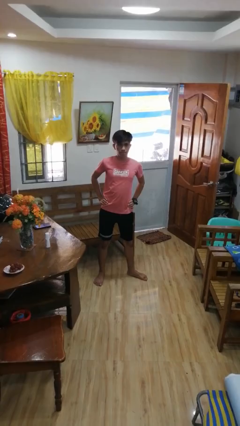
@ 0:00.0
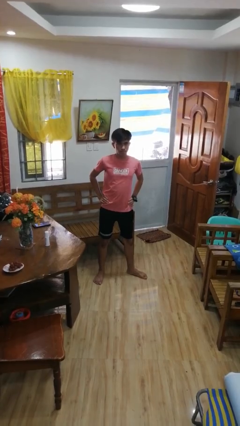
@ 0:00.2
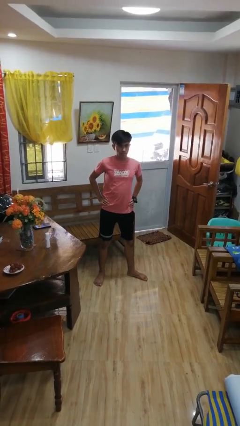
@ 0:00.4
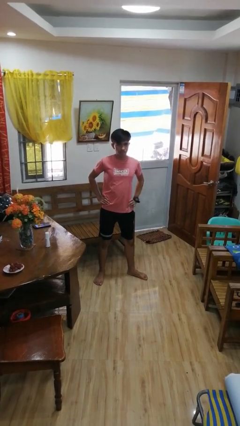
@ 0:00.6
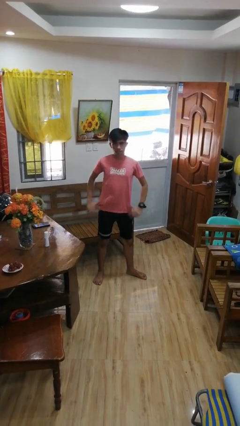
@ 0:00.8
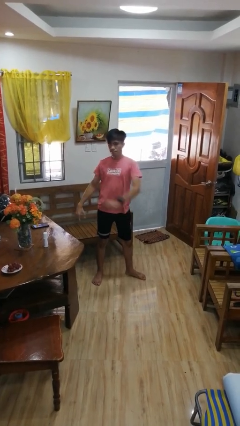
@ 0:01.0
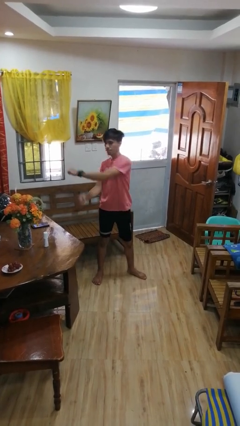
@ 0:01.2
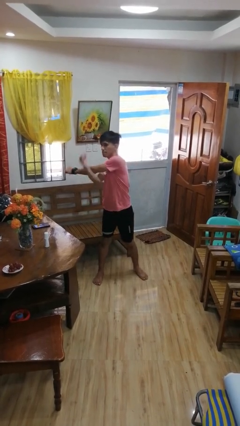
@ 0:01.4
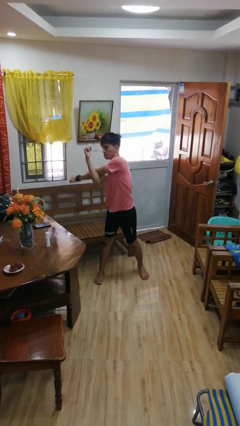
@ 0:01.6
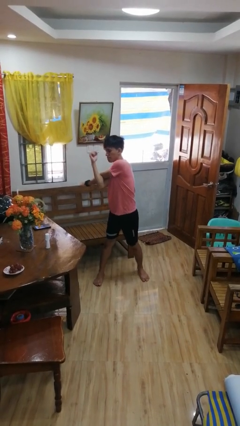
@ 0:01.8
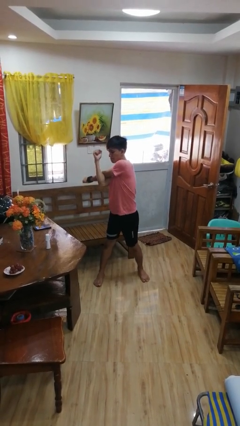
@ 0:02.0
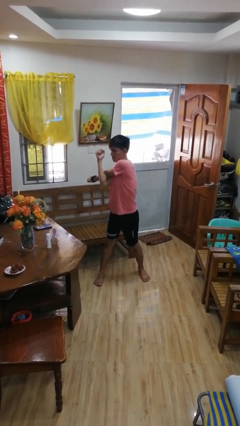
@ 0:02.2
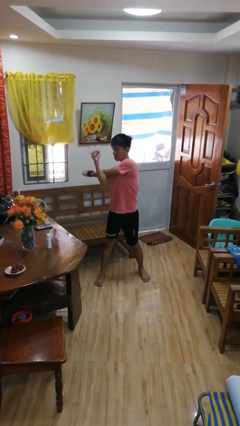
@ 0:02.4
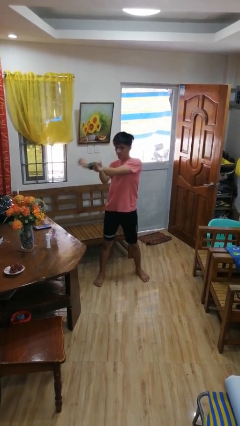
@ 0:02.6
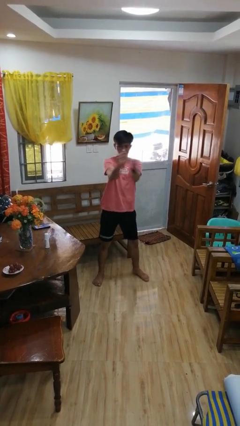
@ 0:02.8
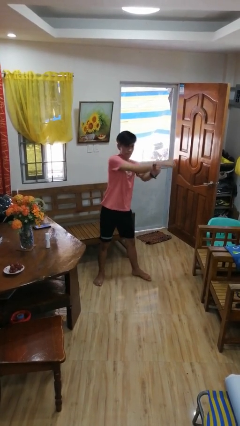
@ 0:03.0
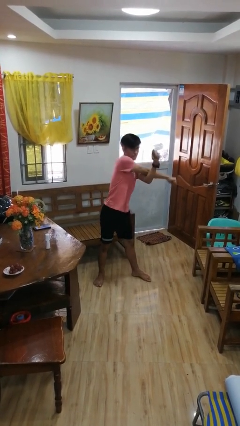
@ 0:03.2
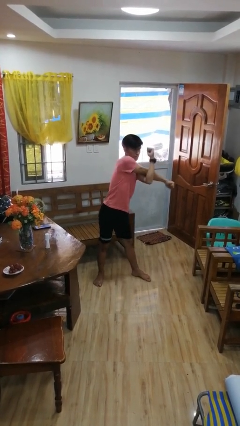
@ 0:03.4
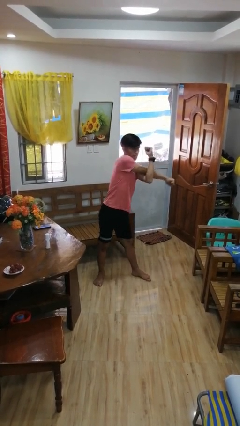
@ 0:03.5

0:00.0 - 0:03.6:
person stretches arms to side

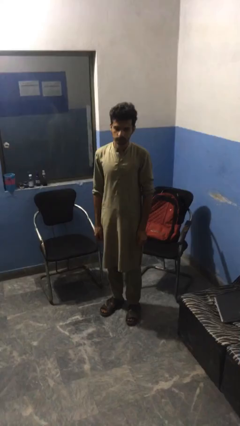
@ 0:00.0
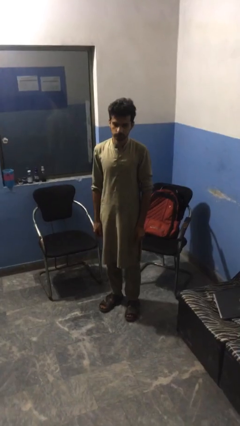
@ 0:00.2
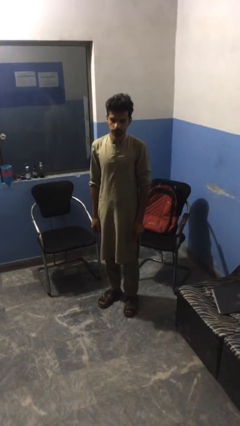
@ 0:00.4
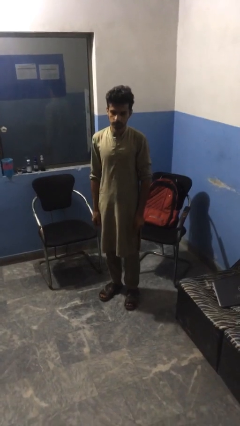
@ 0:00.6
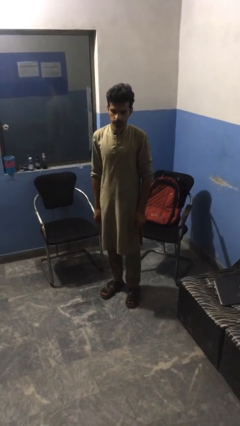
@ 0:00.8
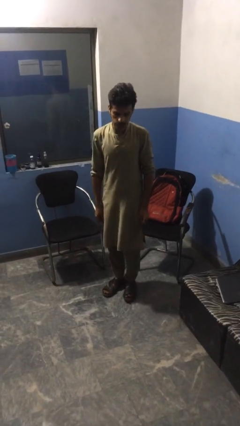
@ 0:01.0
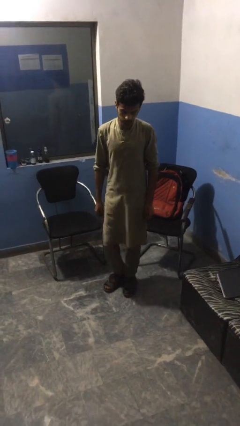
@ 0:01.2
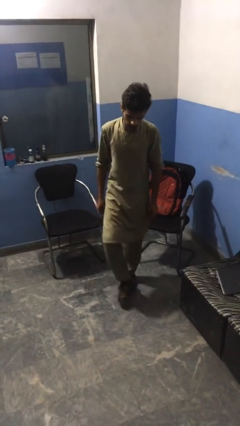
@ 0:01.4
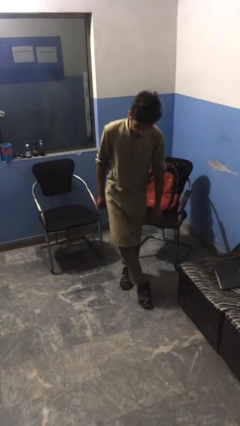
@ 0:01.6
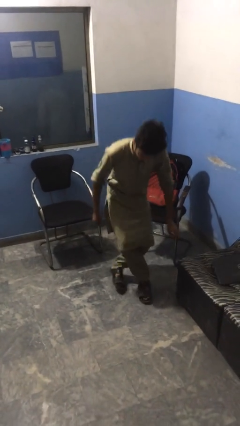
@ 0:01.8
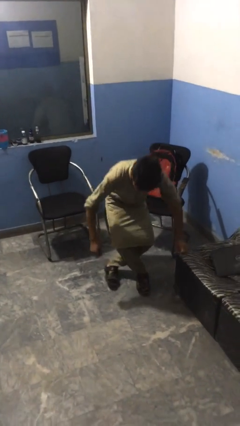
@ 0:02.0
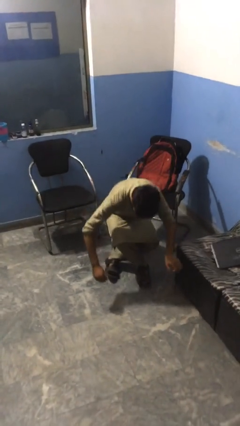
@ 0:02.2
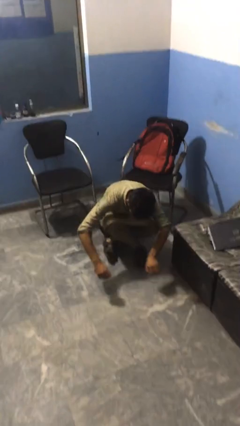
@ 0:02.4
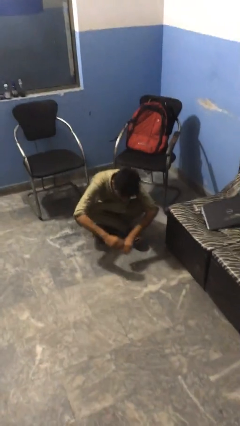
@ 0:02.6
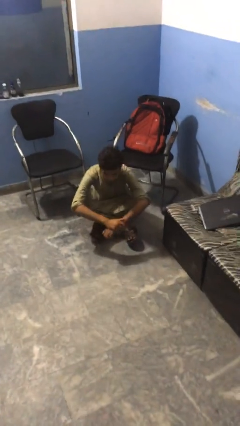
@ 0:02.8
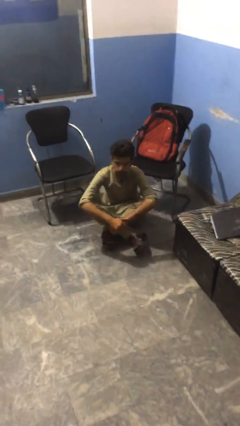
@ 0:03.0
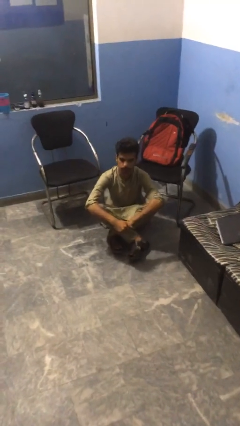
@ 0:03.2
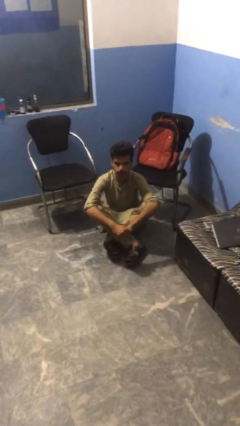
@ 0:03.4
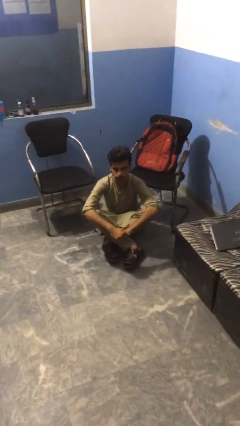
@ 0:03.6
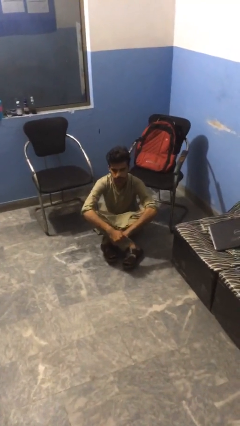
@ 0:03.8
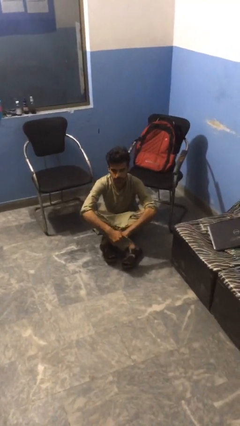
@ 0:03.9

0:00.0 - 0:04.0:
person sits crisscross

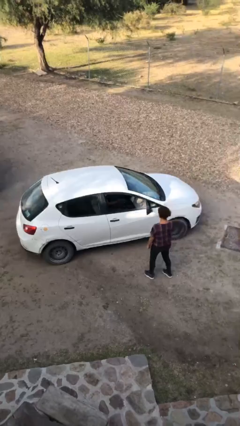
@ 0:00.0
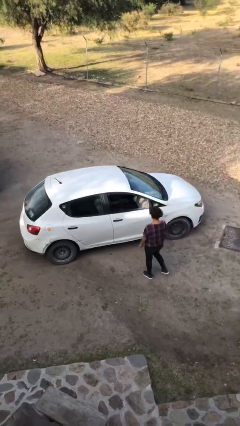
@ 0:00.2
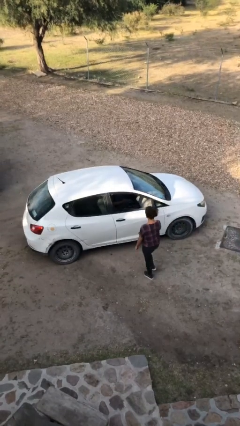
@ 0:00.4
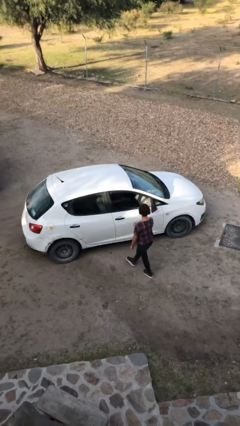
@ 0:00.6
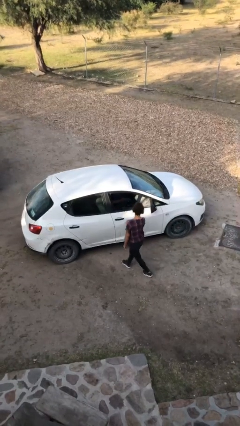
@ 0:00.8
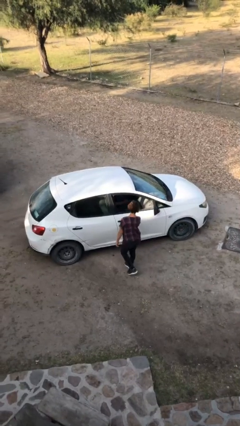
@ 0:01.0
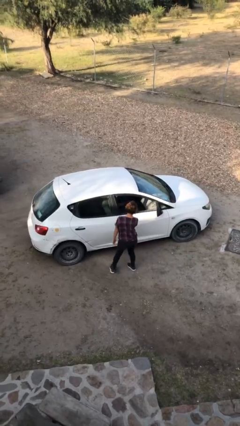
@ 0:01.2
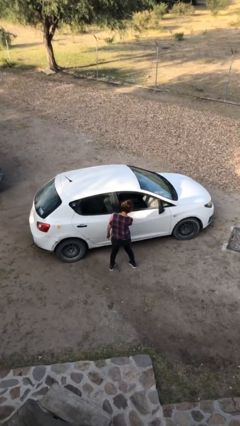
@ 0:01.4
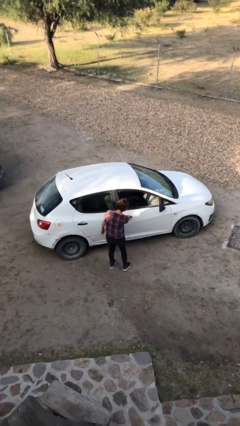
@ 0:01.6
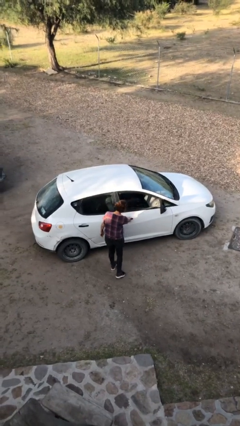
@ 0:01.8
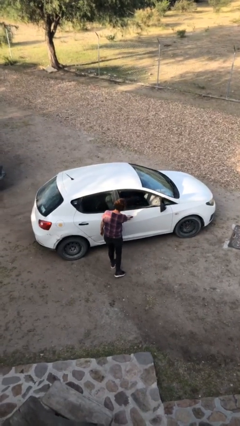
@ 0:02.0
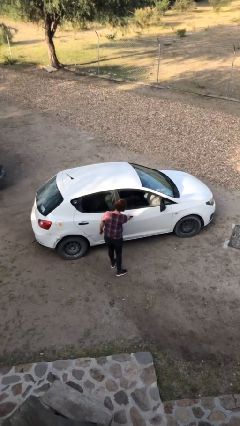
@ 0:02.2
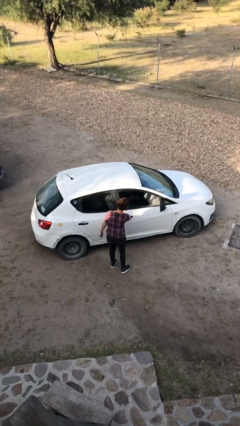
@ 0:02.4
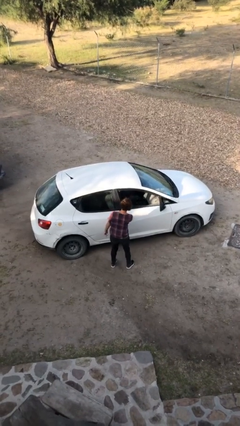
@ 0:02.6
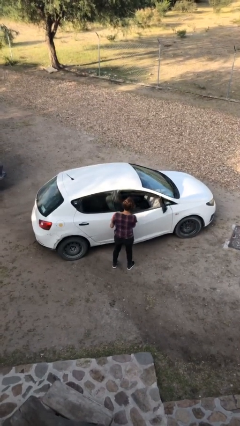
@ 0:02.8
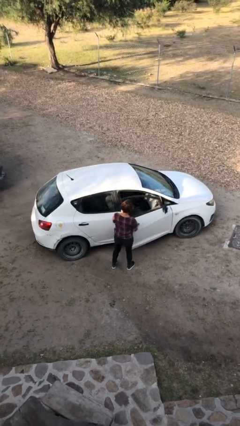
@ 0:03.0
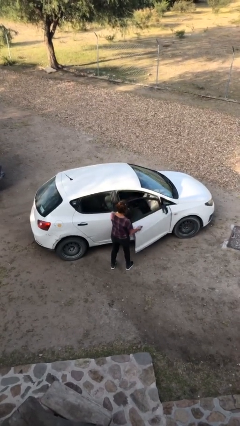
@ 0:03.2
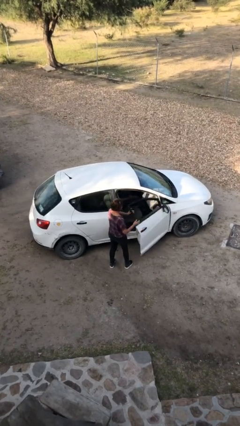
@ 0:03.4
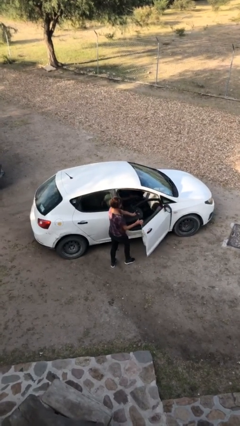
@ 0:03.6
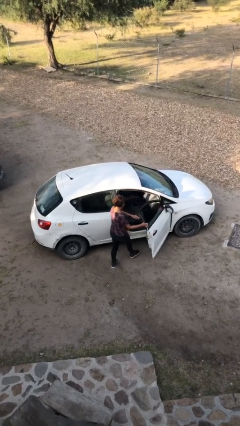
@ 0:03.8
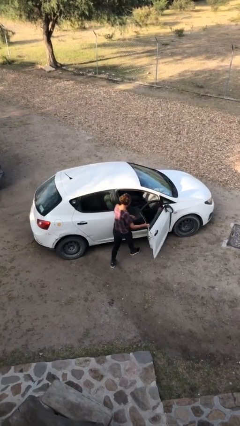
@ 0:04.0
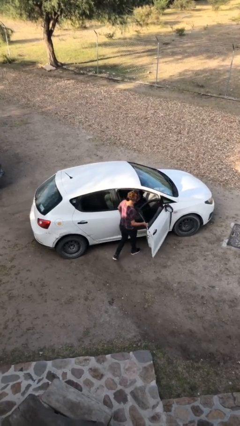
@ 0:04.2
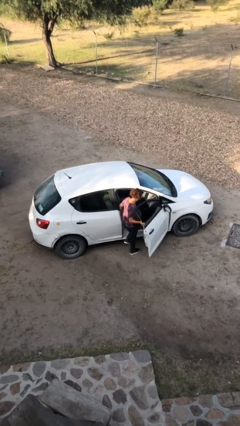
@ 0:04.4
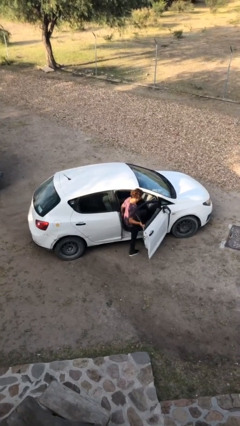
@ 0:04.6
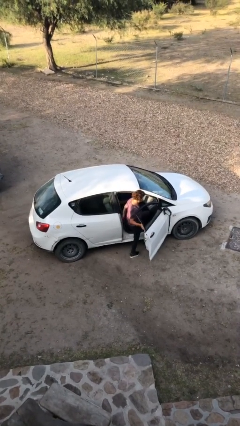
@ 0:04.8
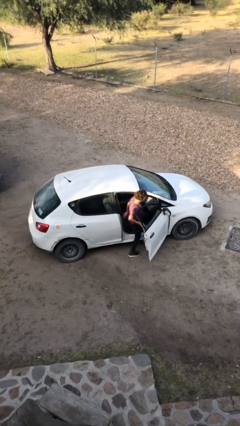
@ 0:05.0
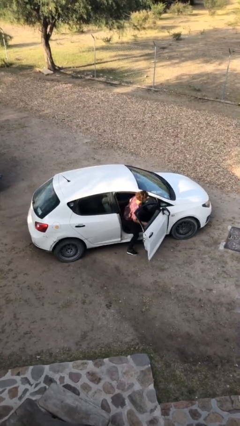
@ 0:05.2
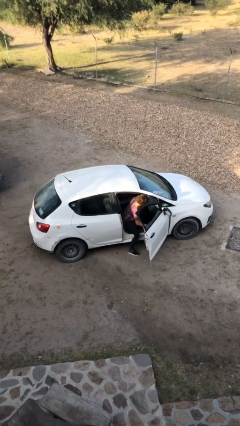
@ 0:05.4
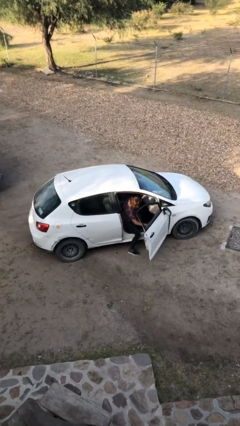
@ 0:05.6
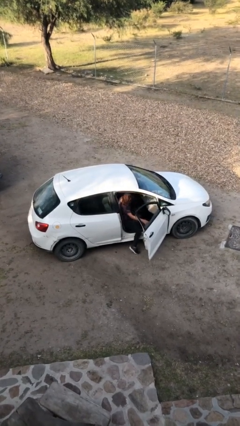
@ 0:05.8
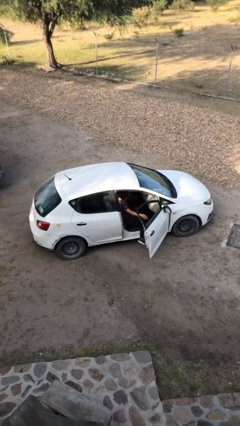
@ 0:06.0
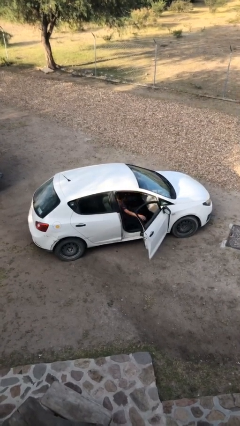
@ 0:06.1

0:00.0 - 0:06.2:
car picks up person

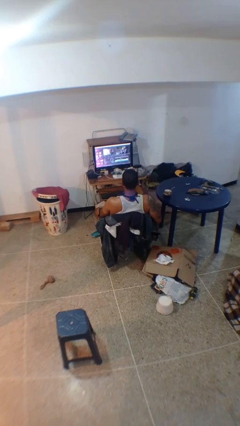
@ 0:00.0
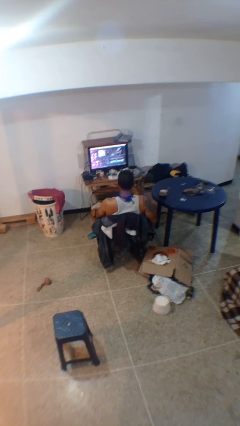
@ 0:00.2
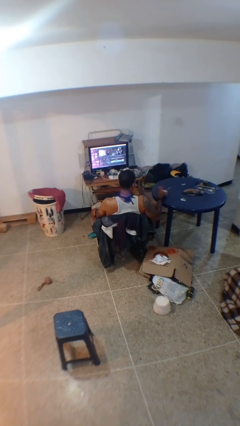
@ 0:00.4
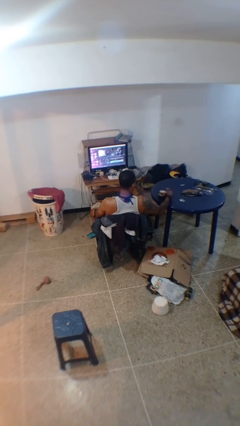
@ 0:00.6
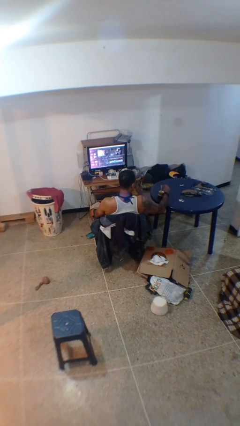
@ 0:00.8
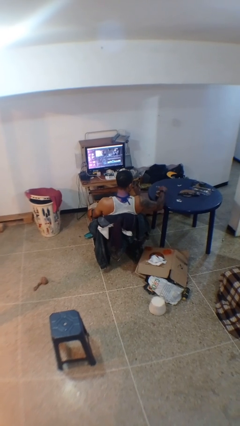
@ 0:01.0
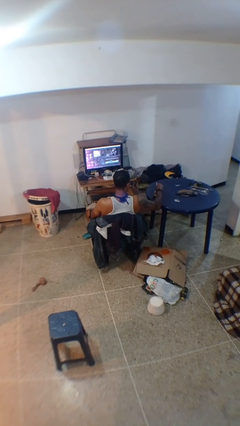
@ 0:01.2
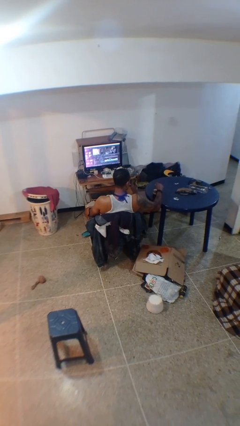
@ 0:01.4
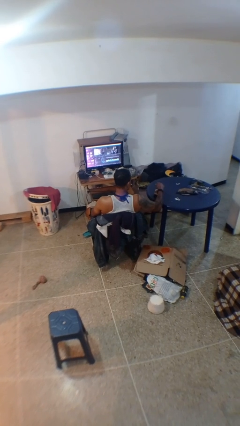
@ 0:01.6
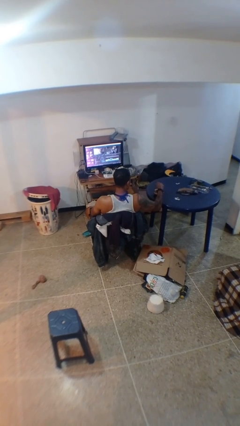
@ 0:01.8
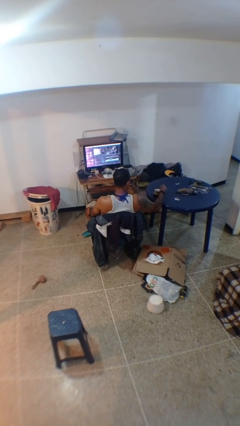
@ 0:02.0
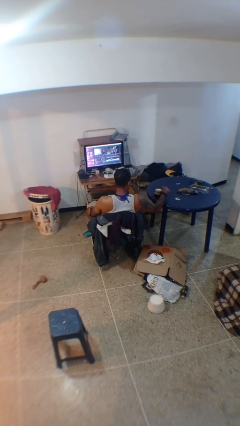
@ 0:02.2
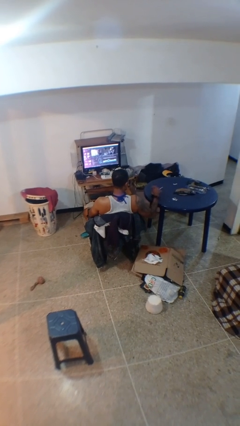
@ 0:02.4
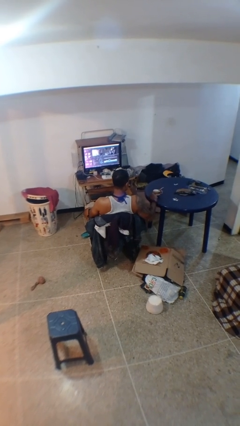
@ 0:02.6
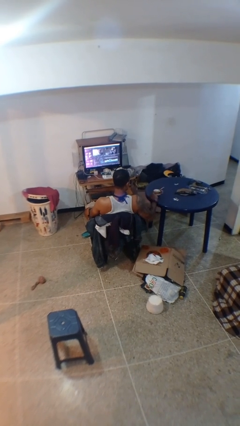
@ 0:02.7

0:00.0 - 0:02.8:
person stirs mug

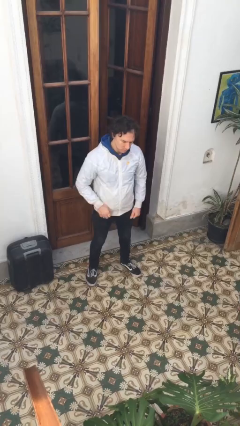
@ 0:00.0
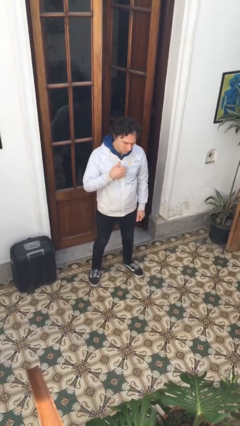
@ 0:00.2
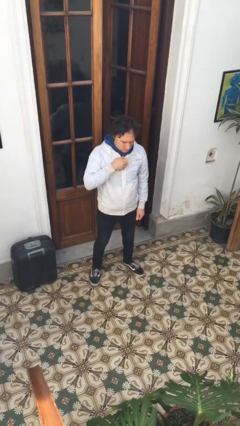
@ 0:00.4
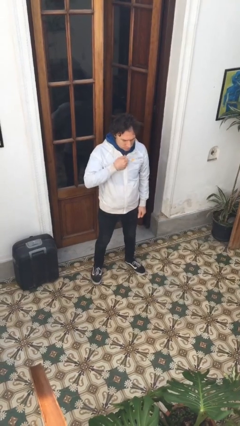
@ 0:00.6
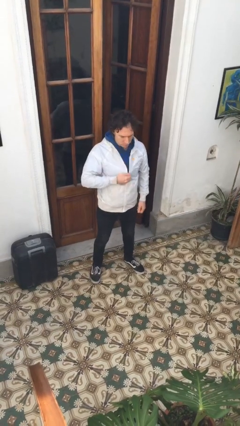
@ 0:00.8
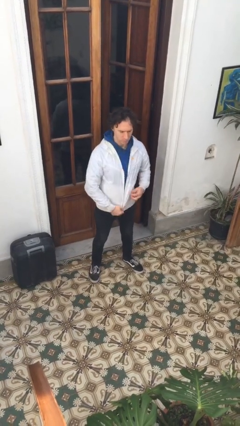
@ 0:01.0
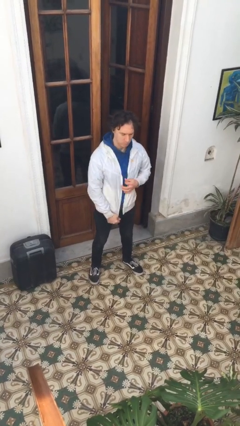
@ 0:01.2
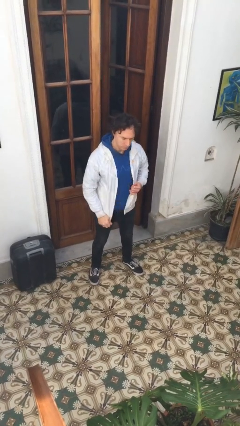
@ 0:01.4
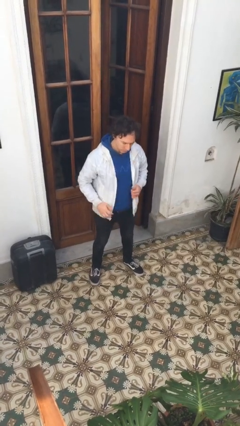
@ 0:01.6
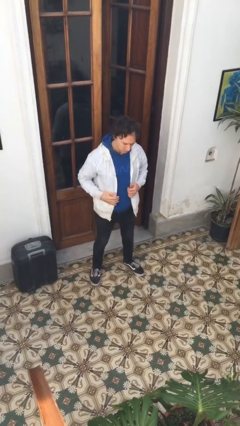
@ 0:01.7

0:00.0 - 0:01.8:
person unzips jacket
